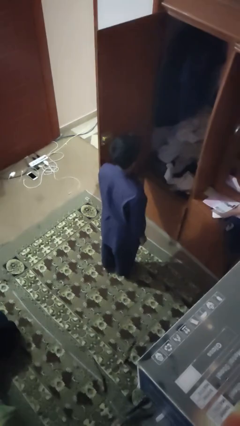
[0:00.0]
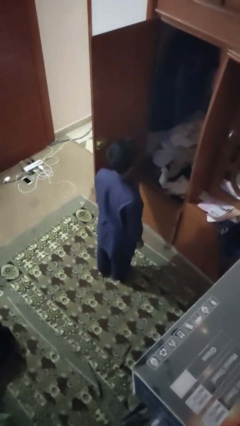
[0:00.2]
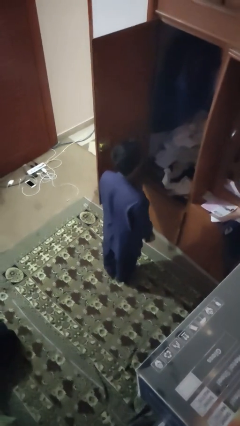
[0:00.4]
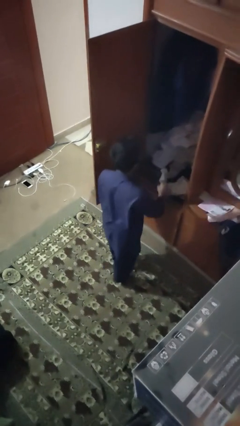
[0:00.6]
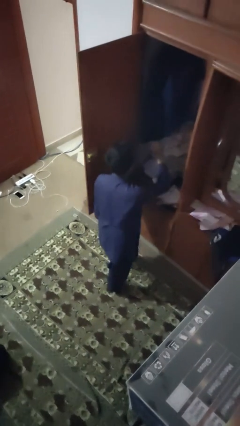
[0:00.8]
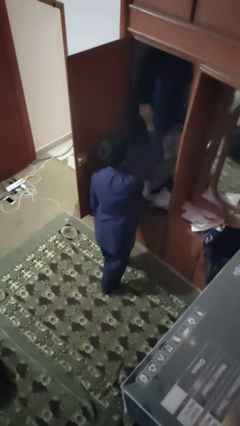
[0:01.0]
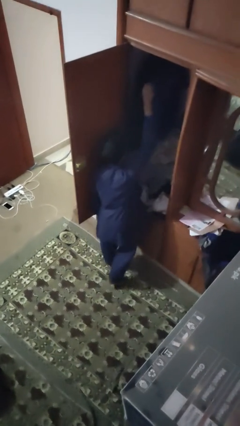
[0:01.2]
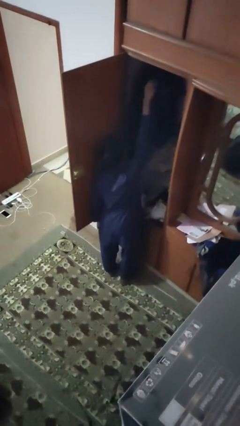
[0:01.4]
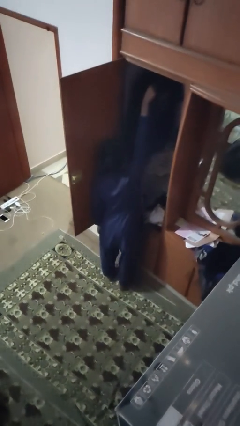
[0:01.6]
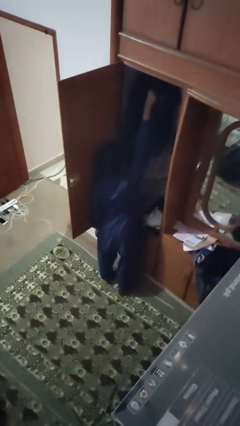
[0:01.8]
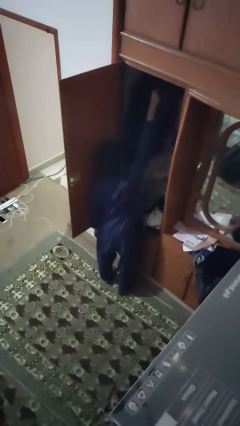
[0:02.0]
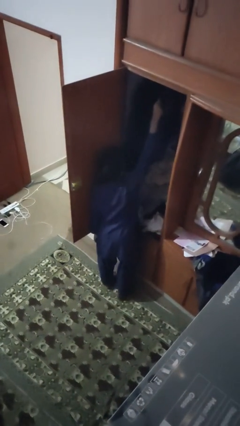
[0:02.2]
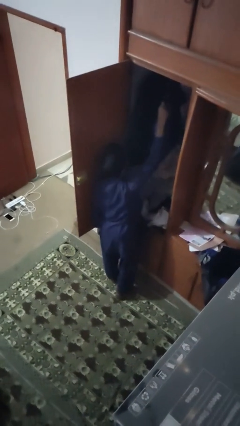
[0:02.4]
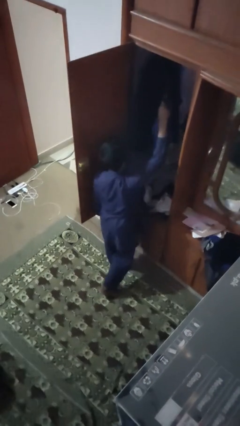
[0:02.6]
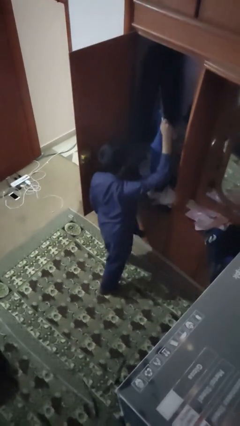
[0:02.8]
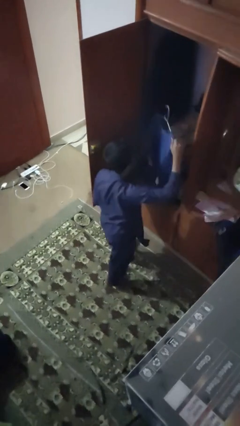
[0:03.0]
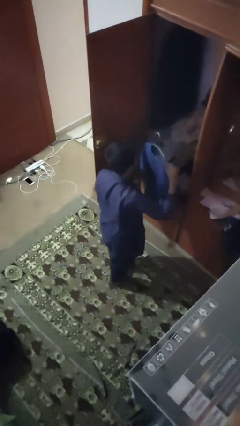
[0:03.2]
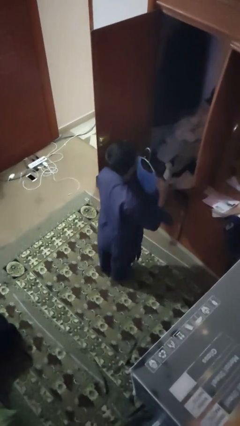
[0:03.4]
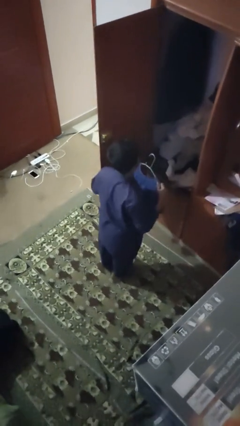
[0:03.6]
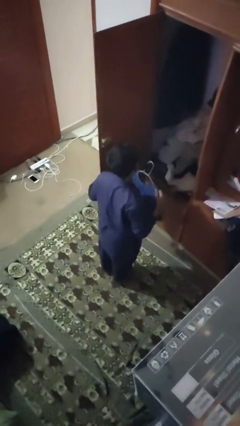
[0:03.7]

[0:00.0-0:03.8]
person takes clothes from closet

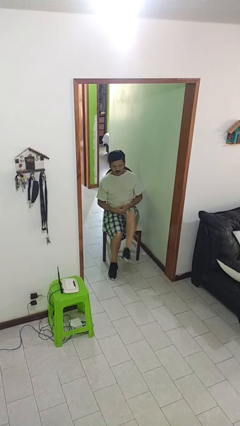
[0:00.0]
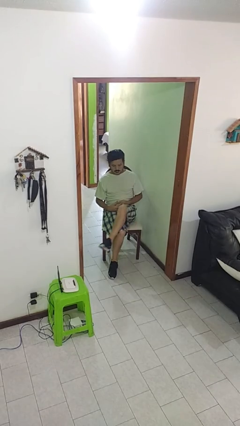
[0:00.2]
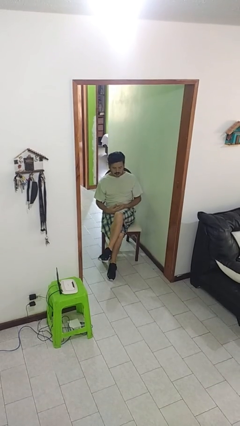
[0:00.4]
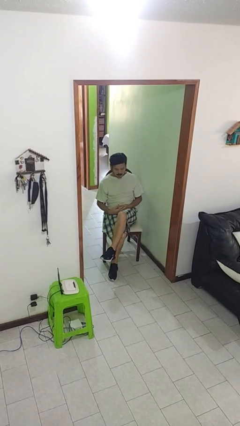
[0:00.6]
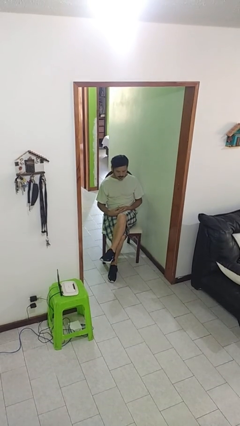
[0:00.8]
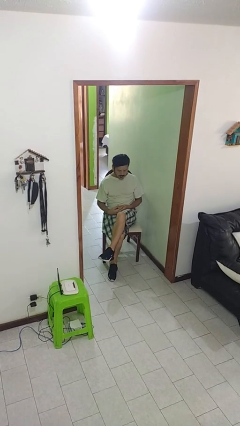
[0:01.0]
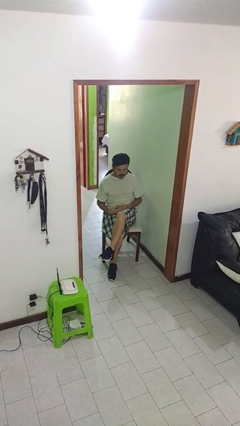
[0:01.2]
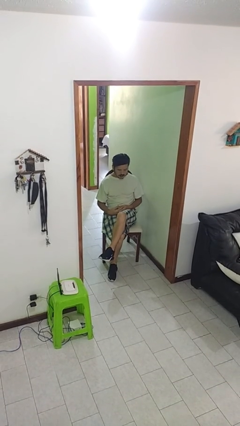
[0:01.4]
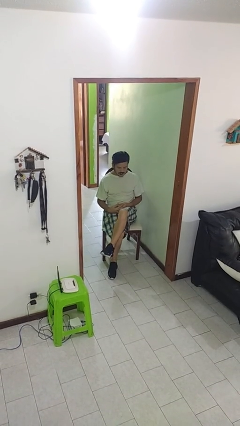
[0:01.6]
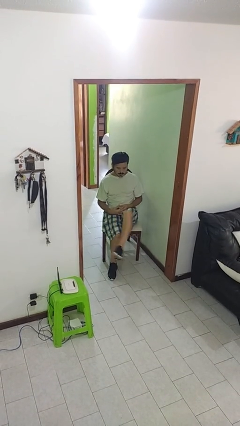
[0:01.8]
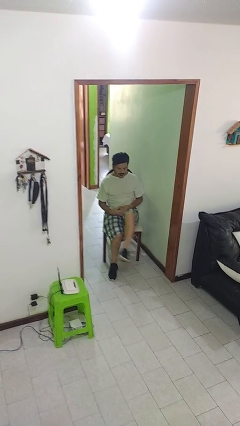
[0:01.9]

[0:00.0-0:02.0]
person crosses legs

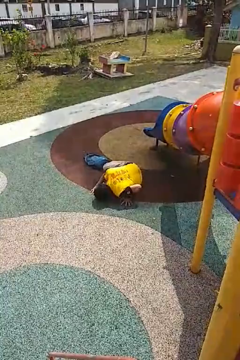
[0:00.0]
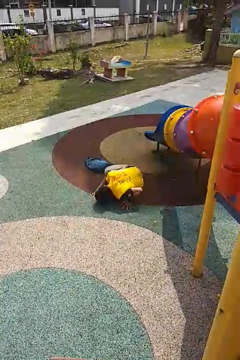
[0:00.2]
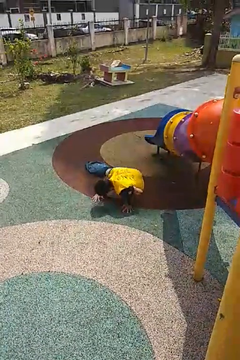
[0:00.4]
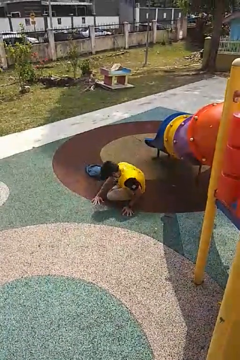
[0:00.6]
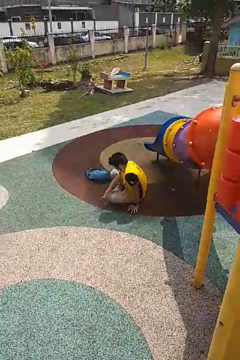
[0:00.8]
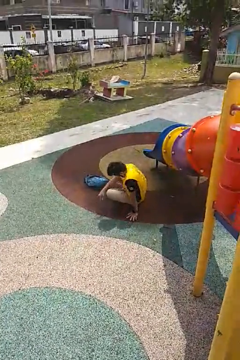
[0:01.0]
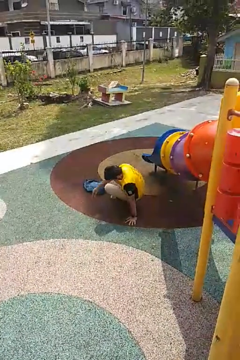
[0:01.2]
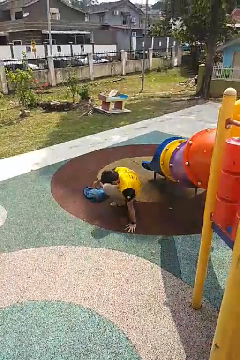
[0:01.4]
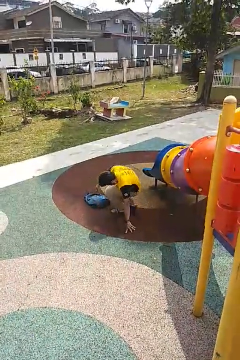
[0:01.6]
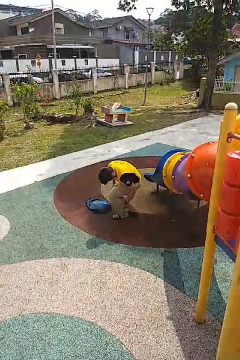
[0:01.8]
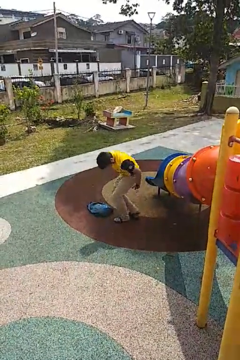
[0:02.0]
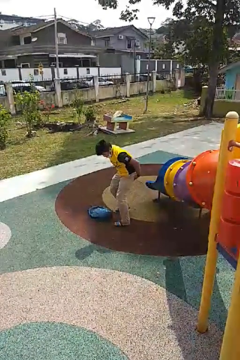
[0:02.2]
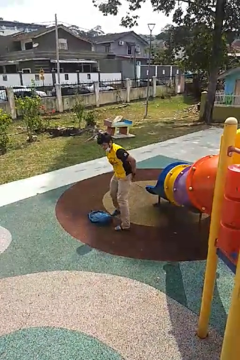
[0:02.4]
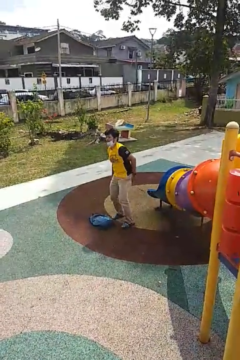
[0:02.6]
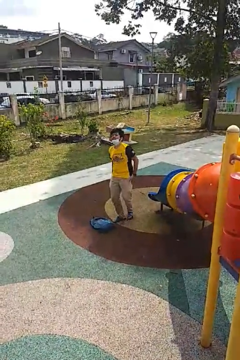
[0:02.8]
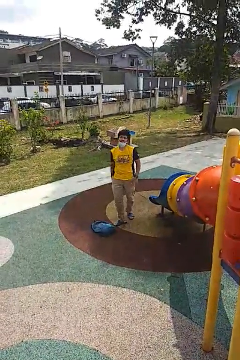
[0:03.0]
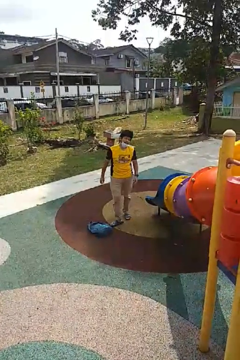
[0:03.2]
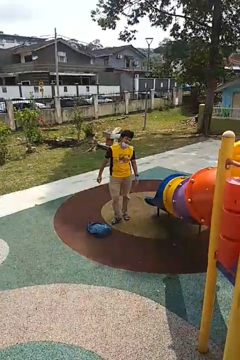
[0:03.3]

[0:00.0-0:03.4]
person stands up from floor

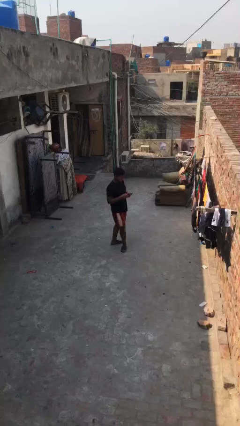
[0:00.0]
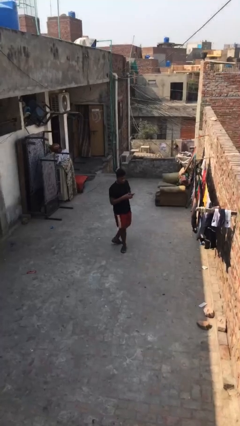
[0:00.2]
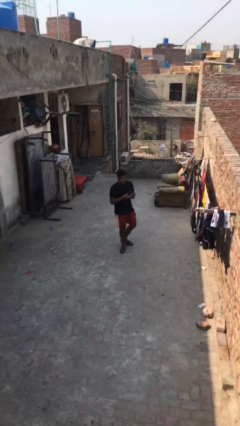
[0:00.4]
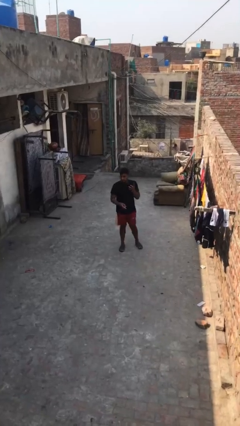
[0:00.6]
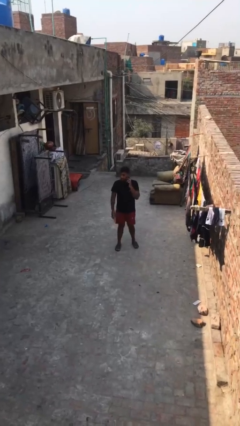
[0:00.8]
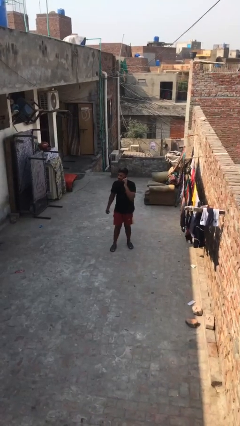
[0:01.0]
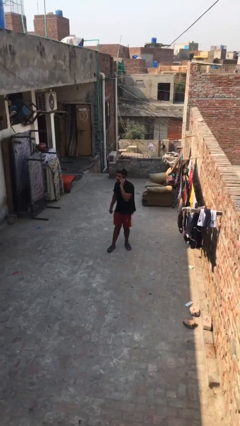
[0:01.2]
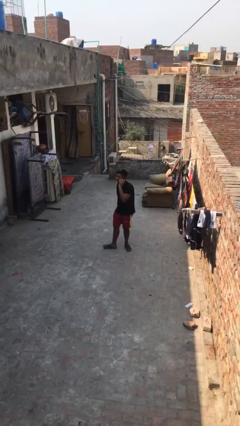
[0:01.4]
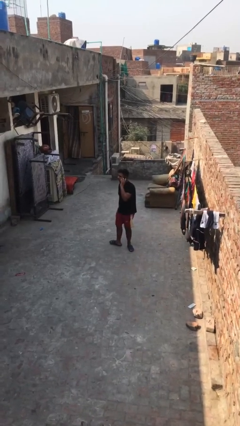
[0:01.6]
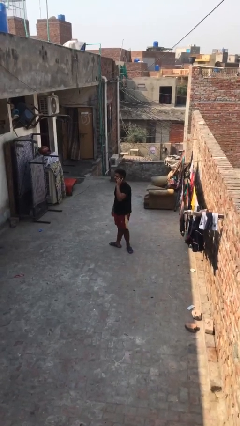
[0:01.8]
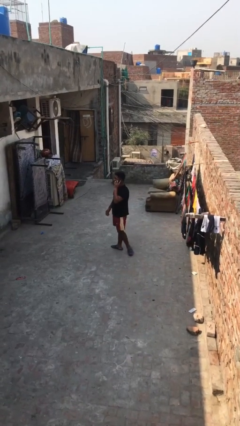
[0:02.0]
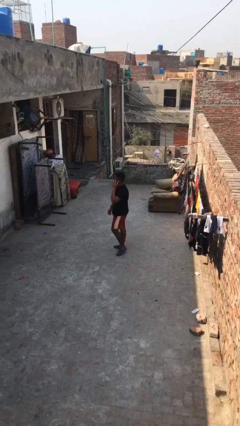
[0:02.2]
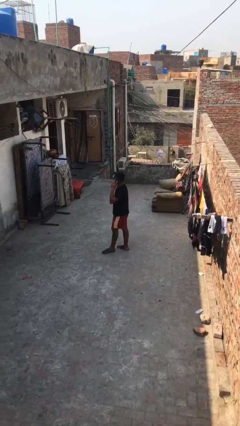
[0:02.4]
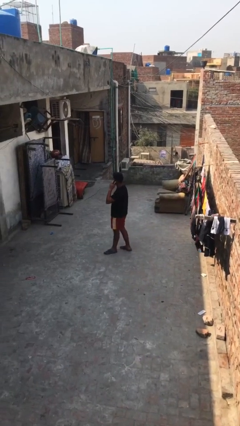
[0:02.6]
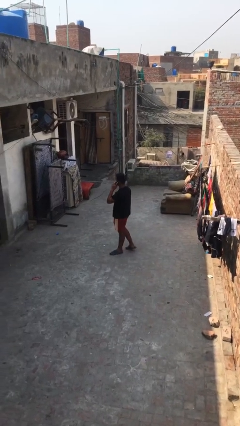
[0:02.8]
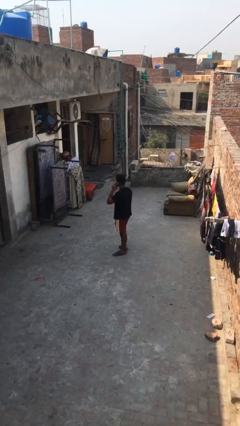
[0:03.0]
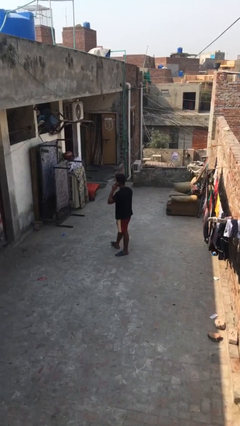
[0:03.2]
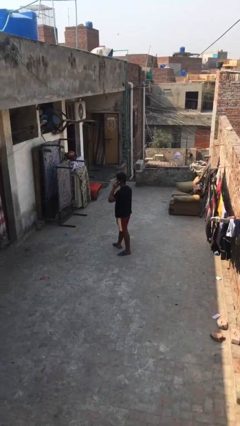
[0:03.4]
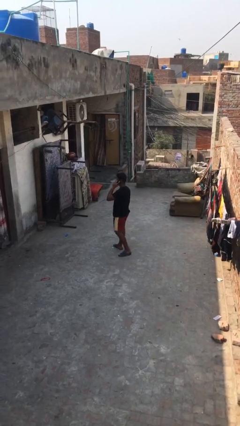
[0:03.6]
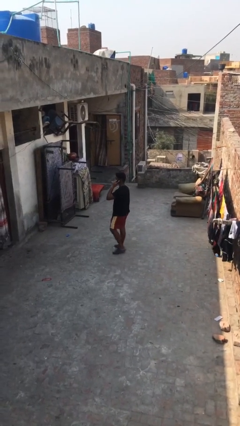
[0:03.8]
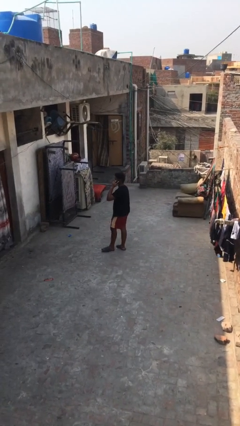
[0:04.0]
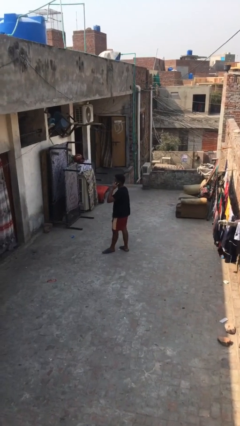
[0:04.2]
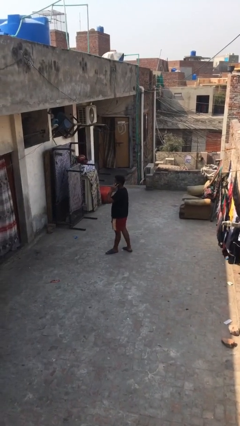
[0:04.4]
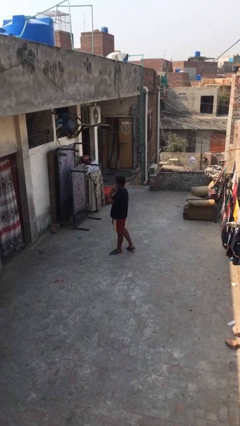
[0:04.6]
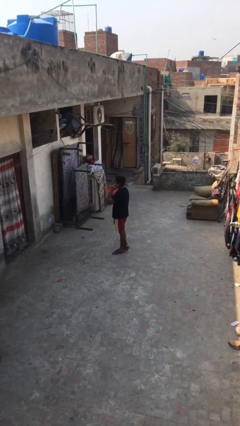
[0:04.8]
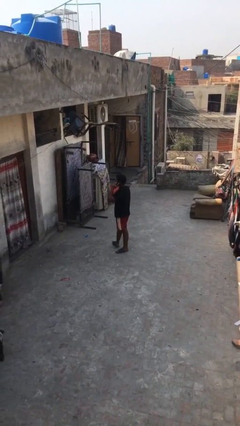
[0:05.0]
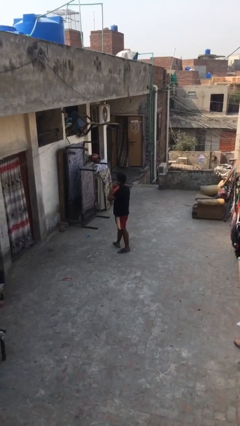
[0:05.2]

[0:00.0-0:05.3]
person talks on phone

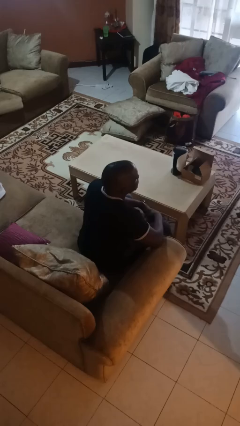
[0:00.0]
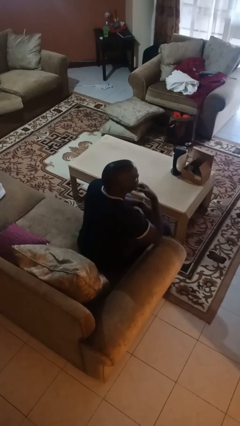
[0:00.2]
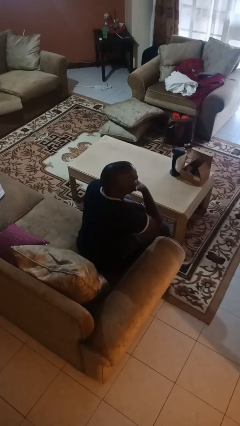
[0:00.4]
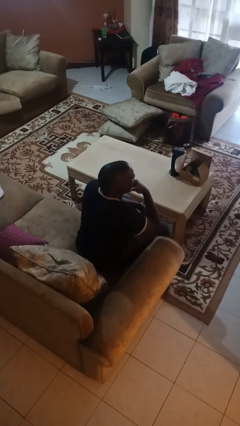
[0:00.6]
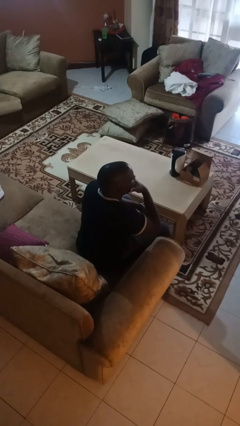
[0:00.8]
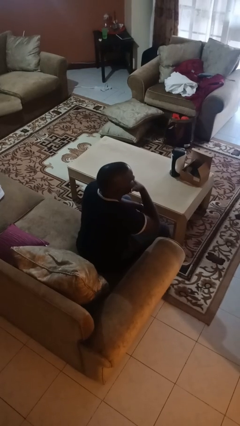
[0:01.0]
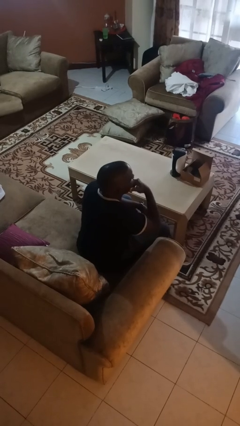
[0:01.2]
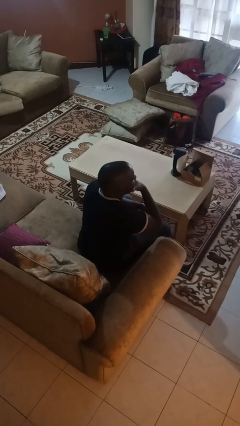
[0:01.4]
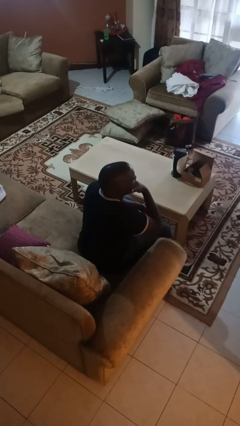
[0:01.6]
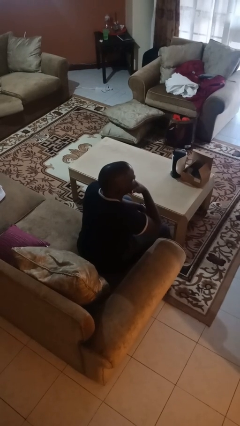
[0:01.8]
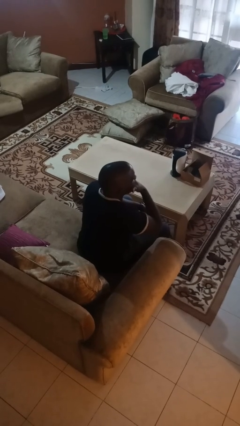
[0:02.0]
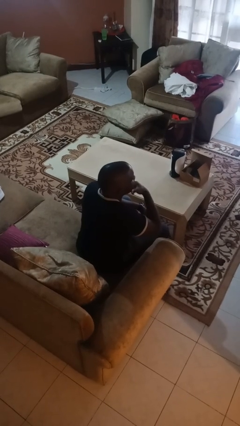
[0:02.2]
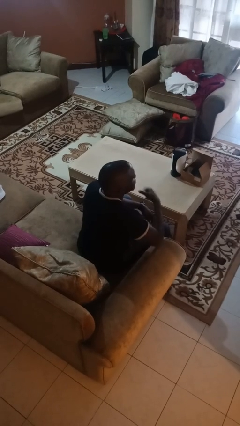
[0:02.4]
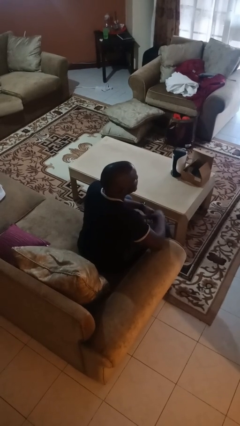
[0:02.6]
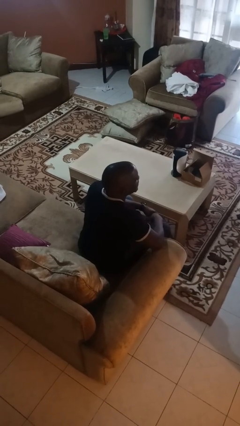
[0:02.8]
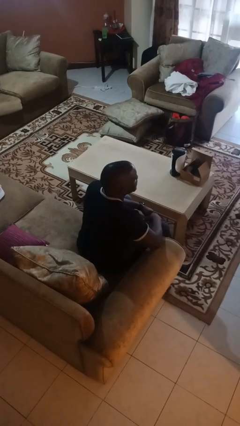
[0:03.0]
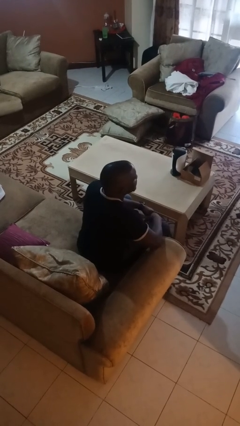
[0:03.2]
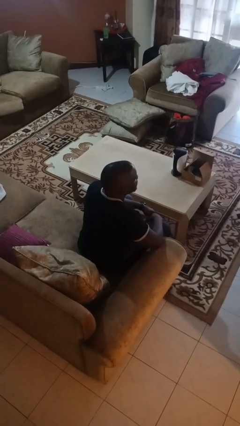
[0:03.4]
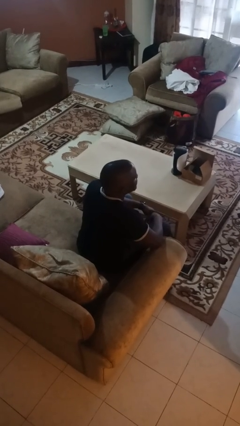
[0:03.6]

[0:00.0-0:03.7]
person strokes chin
